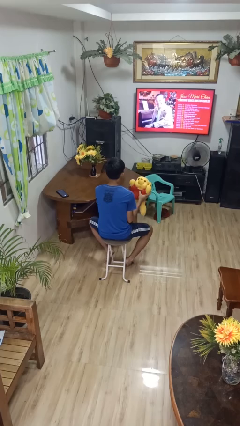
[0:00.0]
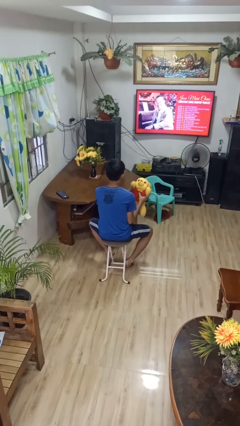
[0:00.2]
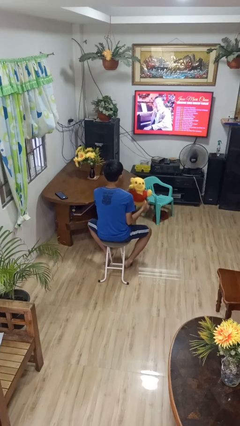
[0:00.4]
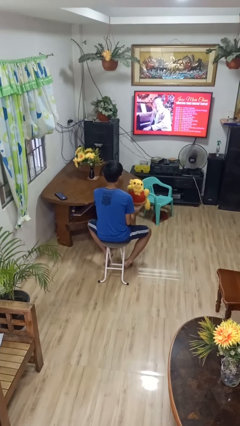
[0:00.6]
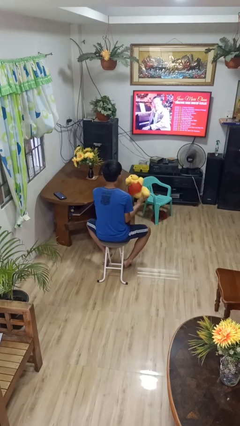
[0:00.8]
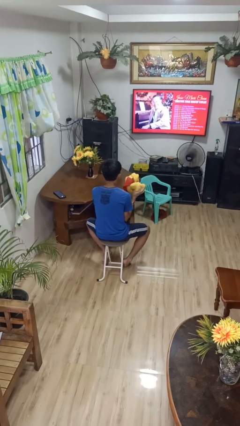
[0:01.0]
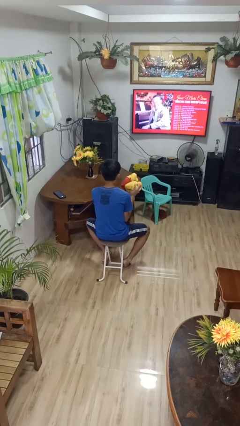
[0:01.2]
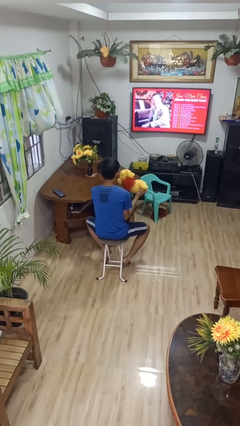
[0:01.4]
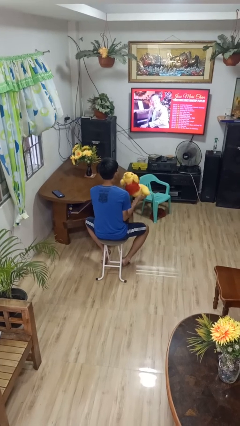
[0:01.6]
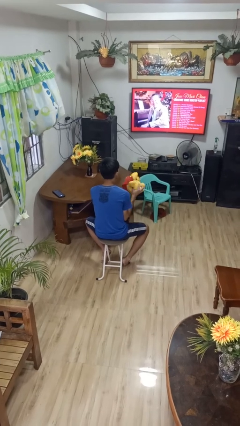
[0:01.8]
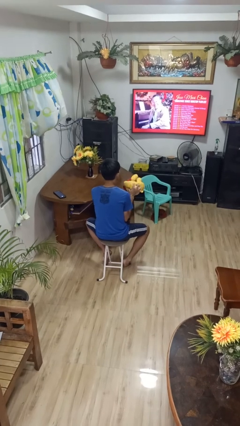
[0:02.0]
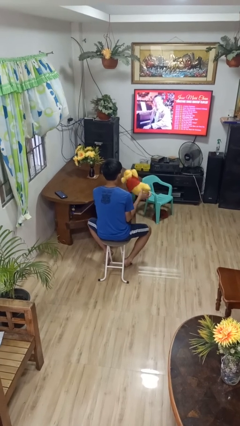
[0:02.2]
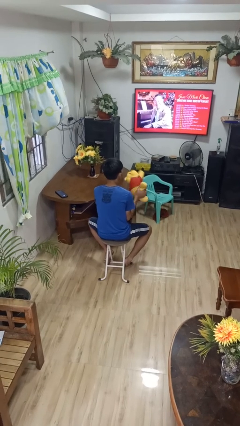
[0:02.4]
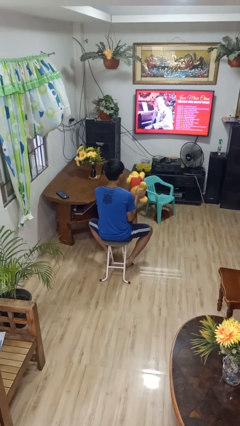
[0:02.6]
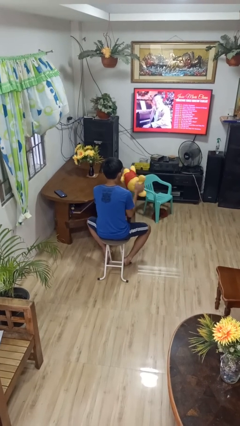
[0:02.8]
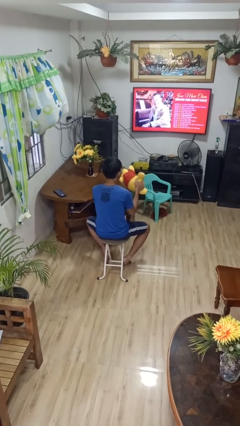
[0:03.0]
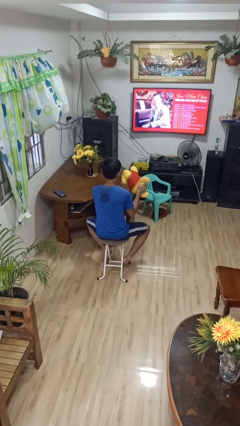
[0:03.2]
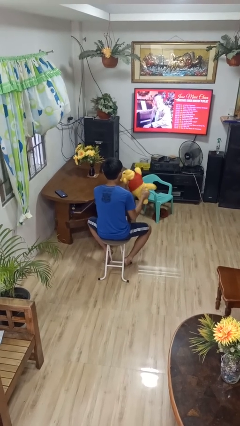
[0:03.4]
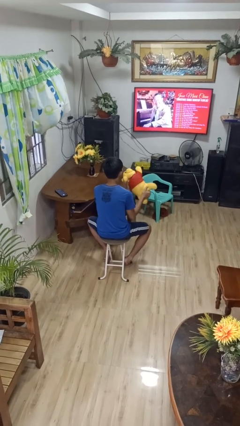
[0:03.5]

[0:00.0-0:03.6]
person squeezes object

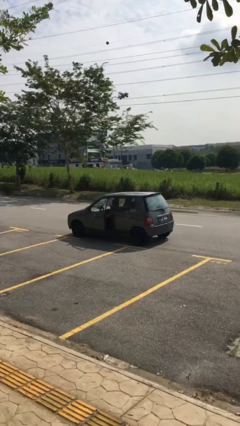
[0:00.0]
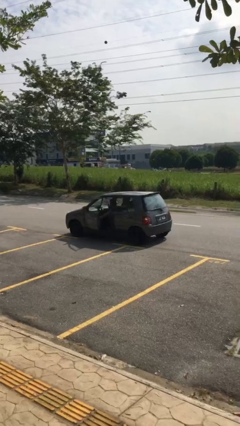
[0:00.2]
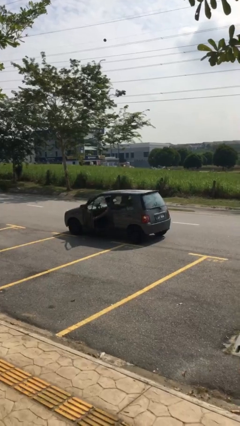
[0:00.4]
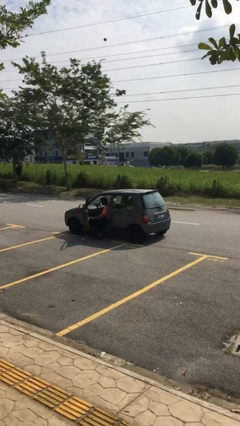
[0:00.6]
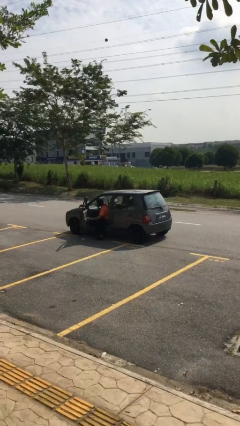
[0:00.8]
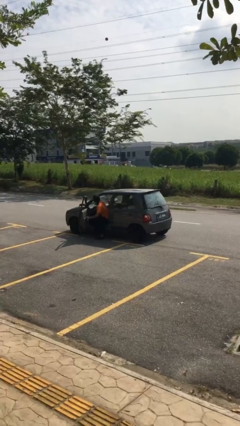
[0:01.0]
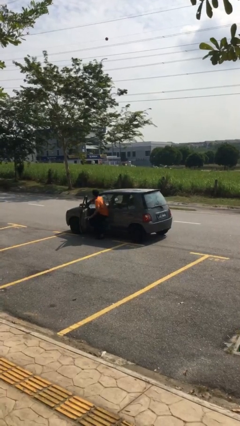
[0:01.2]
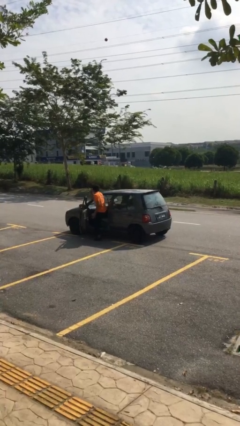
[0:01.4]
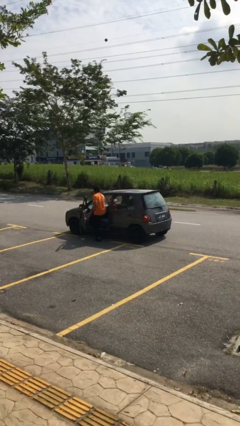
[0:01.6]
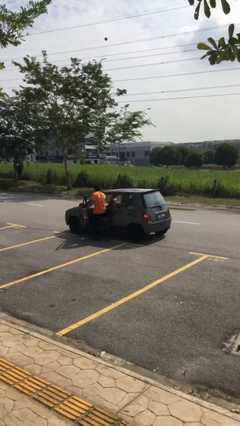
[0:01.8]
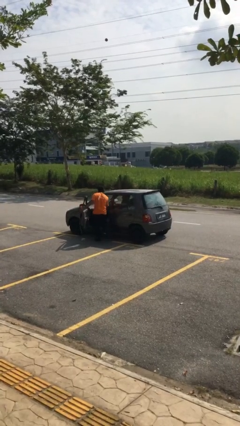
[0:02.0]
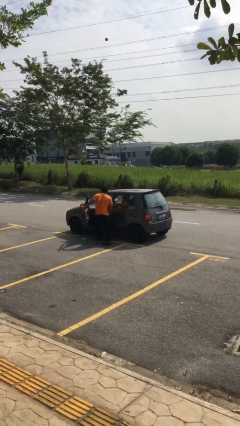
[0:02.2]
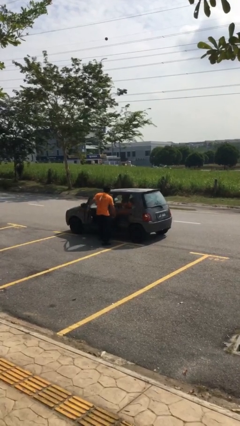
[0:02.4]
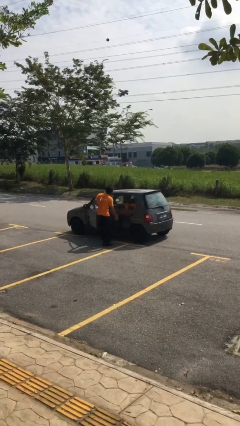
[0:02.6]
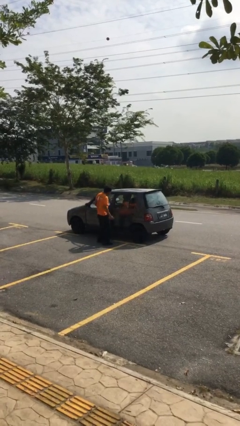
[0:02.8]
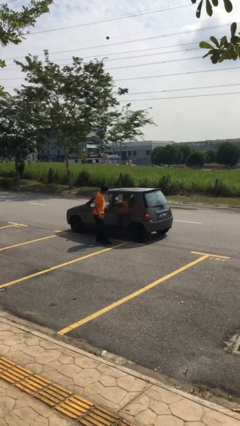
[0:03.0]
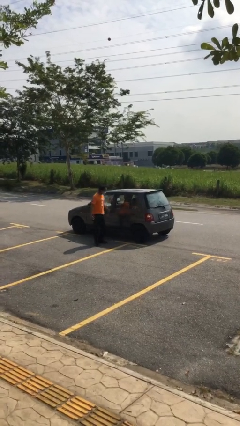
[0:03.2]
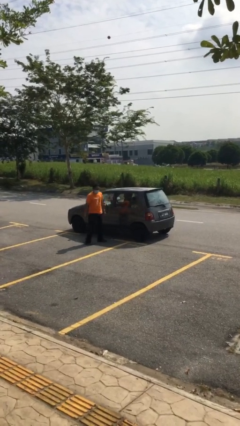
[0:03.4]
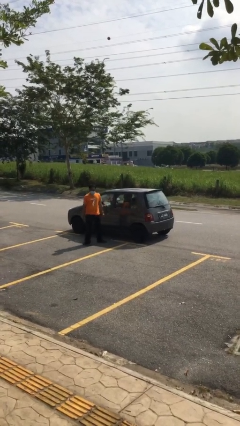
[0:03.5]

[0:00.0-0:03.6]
car drops off person

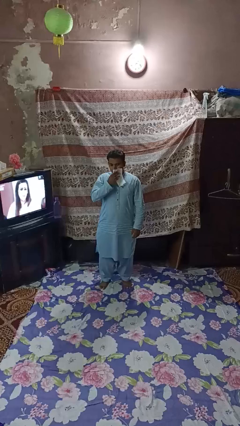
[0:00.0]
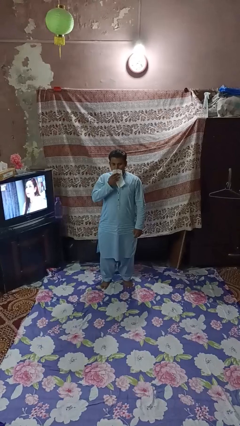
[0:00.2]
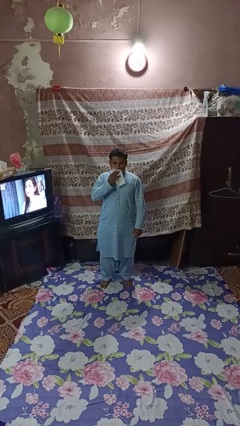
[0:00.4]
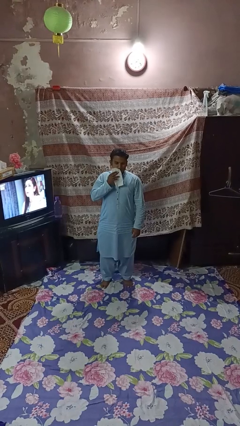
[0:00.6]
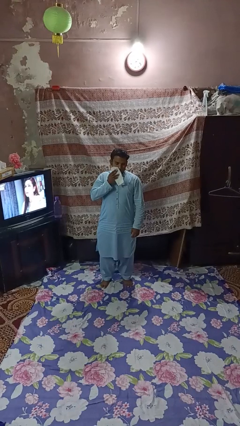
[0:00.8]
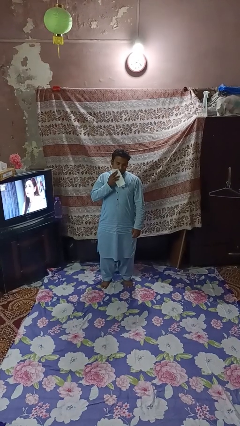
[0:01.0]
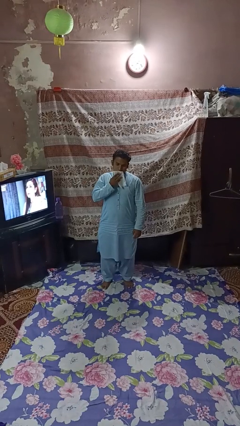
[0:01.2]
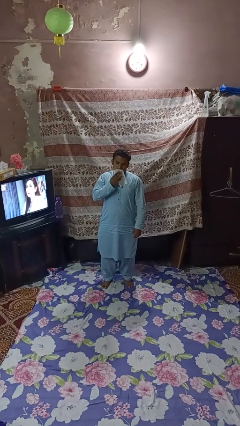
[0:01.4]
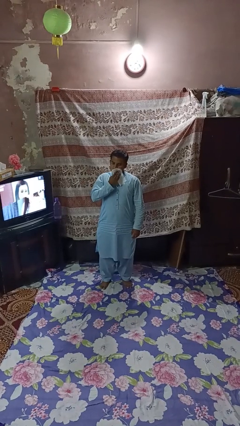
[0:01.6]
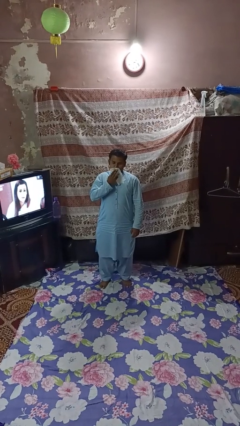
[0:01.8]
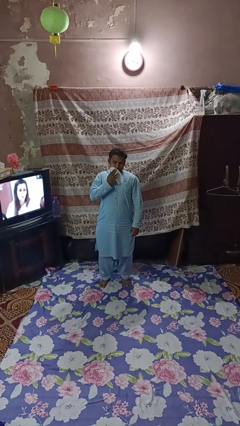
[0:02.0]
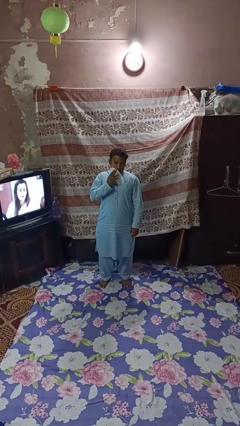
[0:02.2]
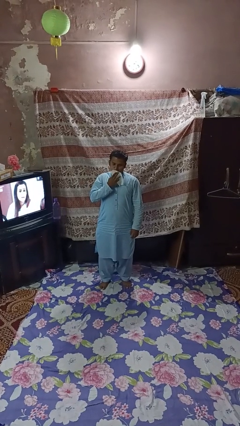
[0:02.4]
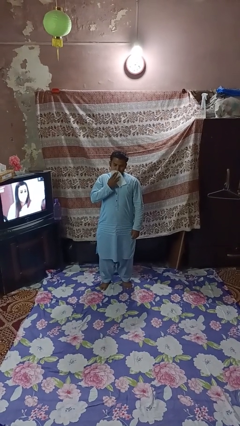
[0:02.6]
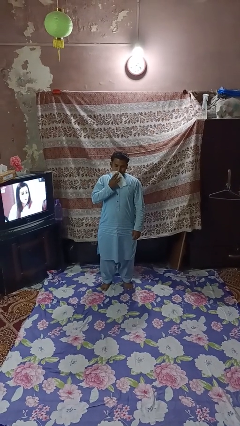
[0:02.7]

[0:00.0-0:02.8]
person wipes mouth with napkin

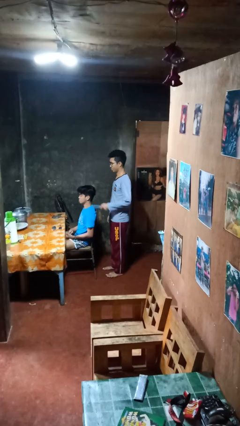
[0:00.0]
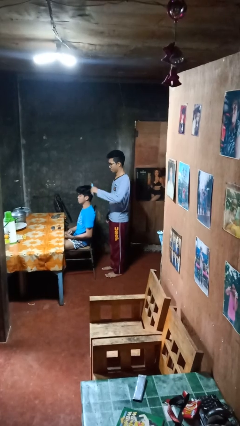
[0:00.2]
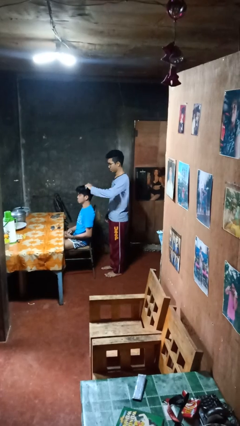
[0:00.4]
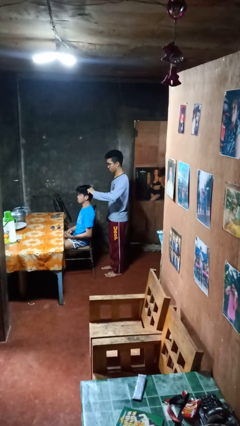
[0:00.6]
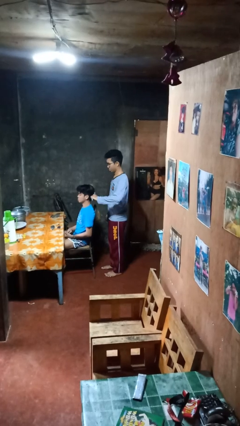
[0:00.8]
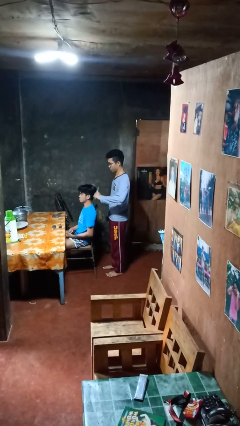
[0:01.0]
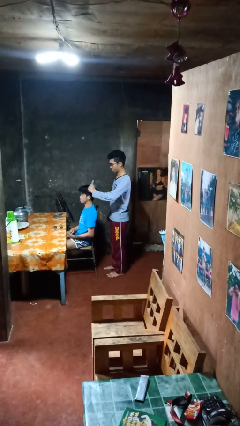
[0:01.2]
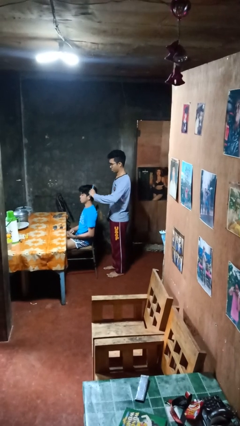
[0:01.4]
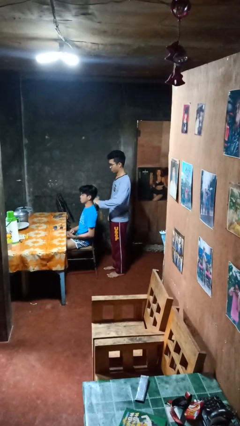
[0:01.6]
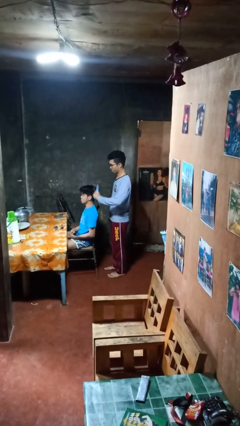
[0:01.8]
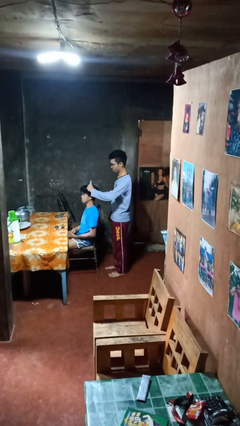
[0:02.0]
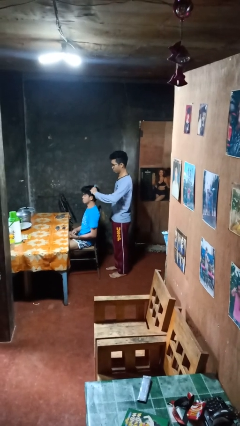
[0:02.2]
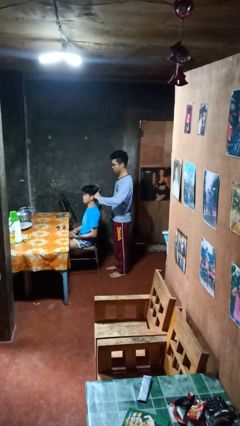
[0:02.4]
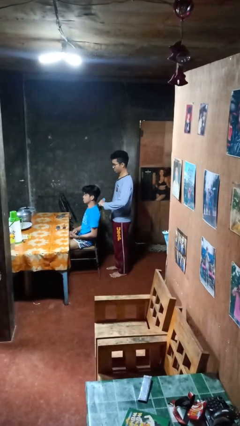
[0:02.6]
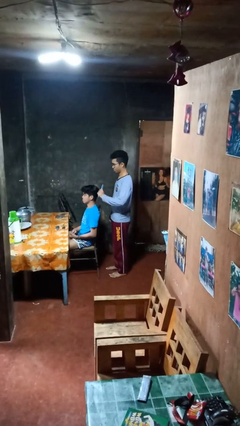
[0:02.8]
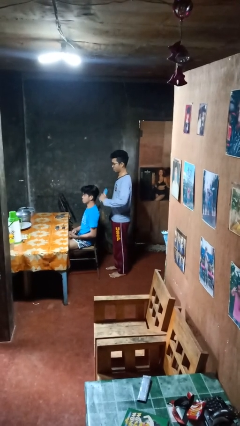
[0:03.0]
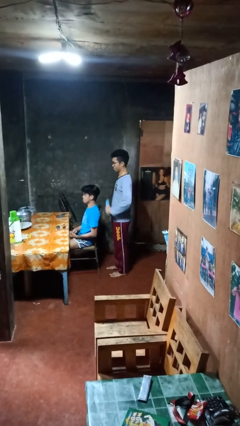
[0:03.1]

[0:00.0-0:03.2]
person brushes hair of person

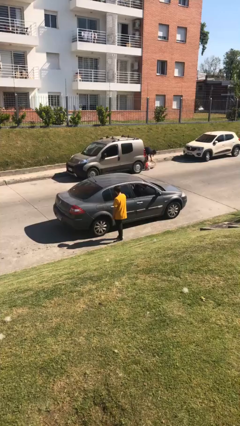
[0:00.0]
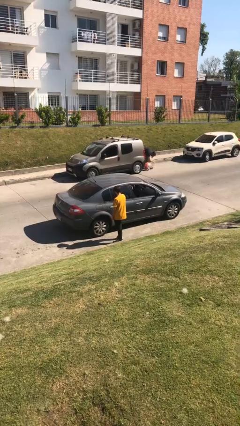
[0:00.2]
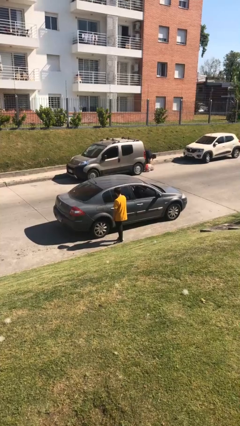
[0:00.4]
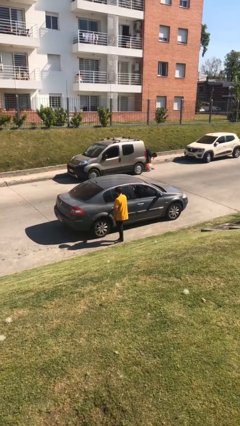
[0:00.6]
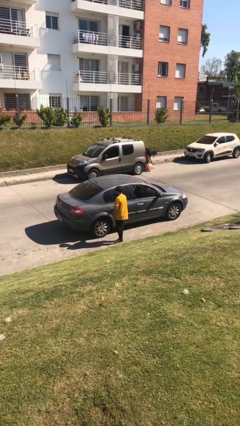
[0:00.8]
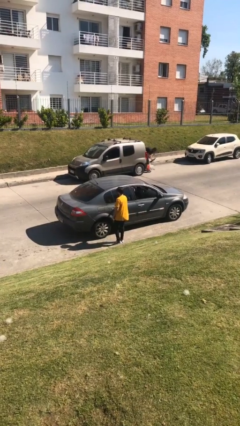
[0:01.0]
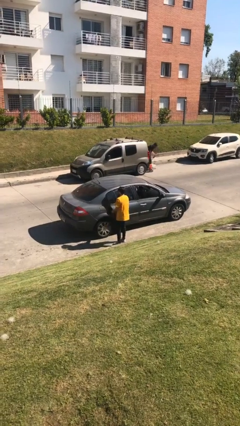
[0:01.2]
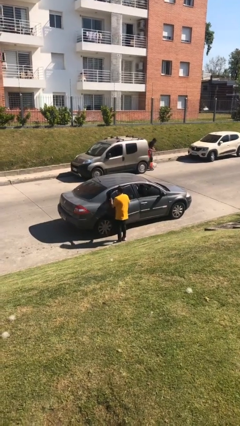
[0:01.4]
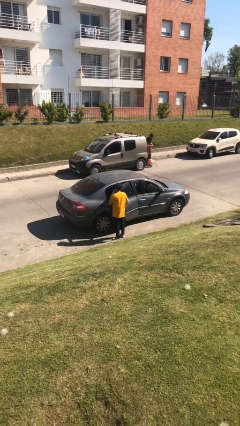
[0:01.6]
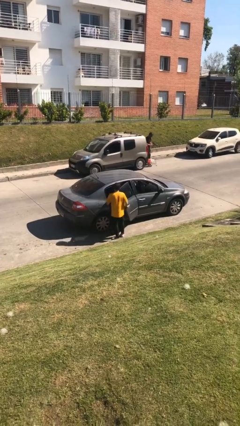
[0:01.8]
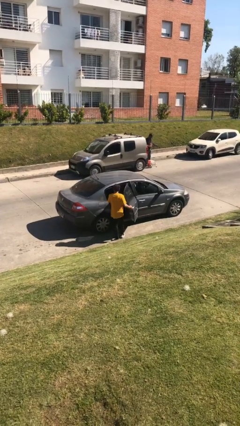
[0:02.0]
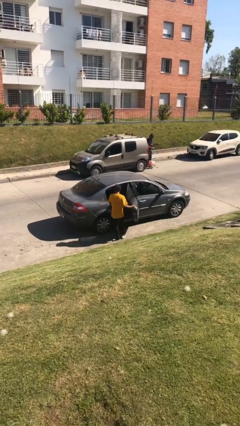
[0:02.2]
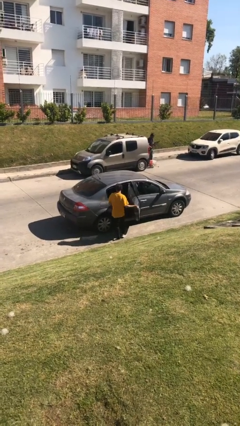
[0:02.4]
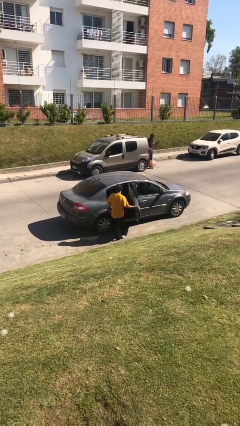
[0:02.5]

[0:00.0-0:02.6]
person opens car door

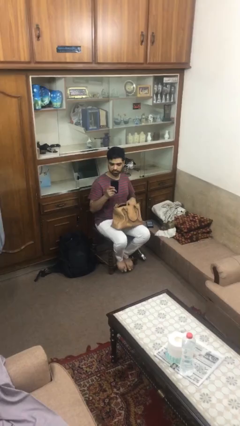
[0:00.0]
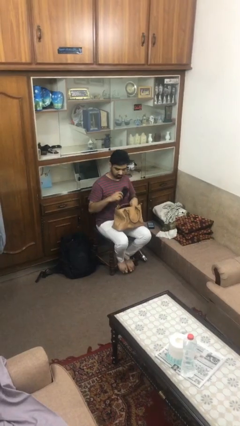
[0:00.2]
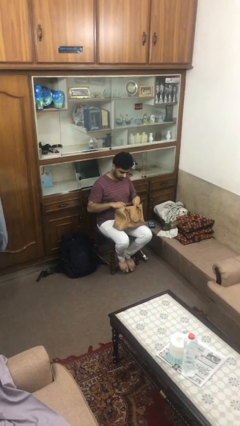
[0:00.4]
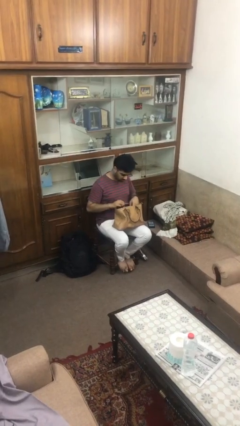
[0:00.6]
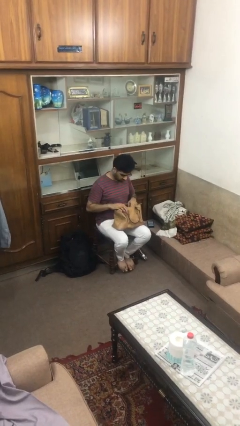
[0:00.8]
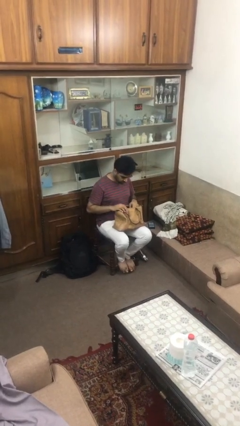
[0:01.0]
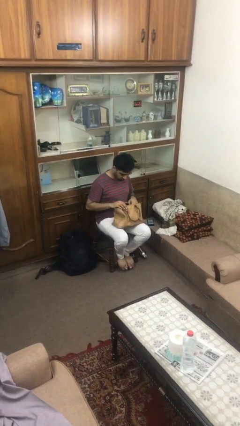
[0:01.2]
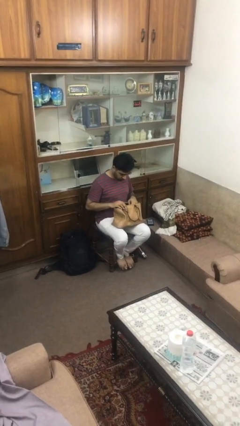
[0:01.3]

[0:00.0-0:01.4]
person puts object into purse

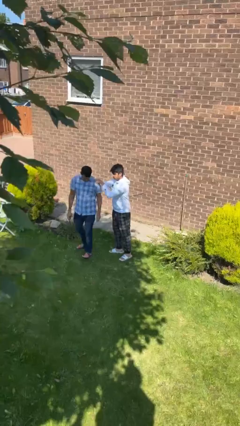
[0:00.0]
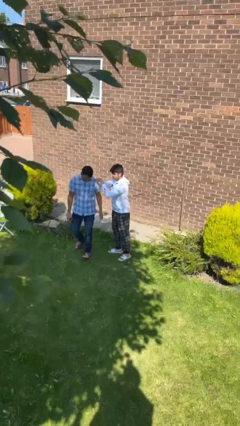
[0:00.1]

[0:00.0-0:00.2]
person spins person around
